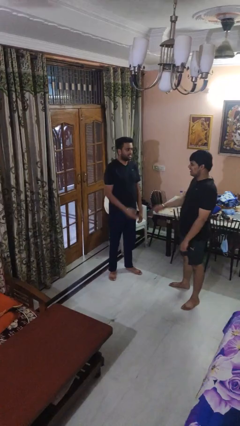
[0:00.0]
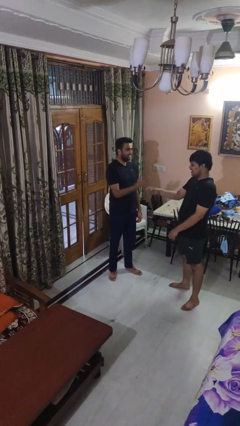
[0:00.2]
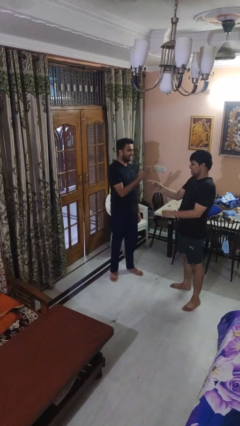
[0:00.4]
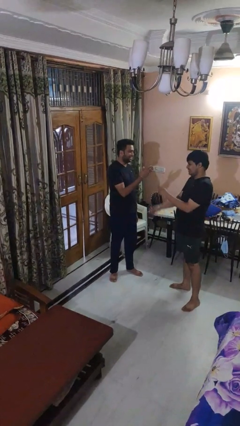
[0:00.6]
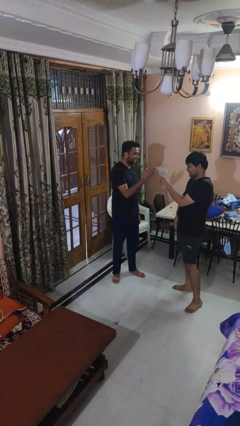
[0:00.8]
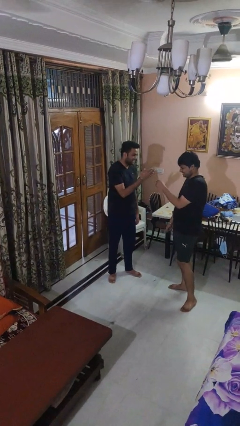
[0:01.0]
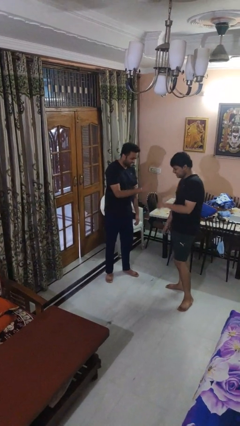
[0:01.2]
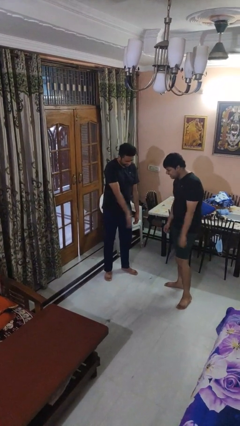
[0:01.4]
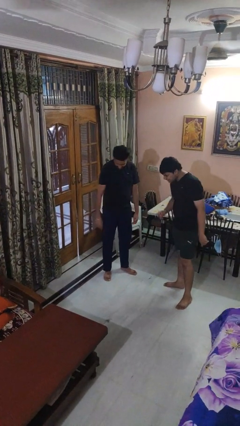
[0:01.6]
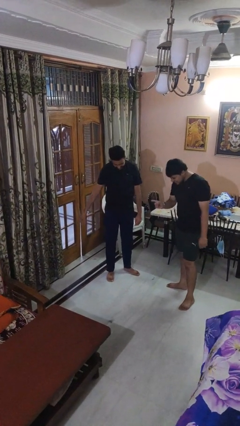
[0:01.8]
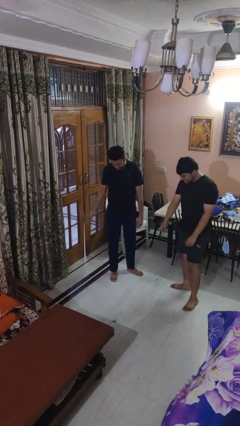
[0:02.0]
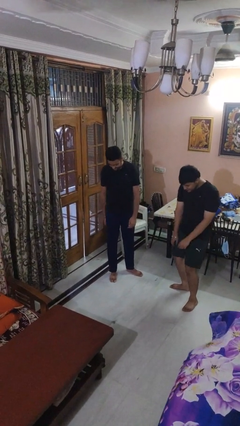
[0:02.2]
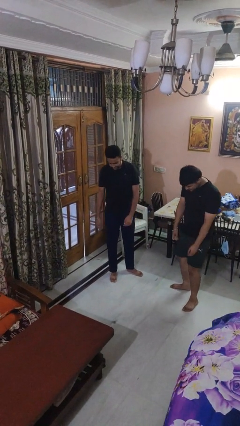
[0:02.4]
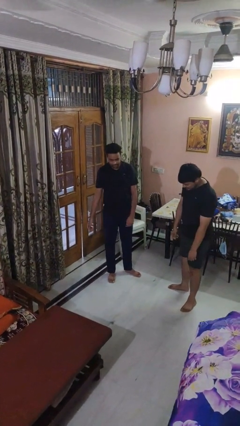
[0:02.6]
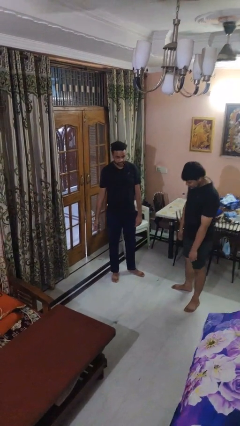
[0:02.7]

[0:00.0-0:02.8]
person laughs with person

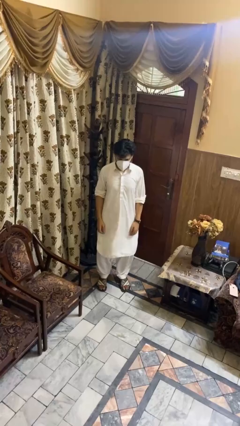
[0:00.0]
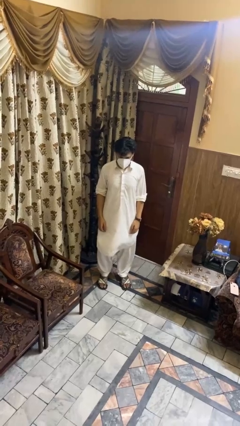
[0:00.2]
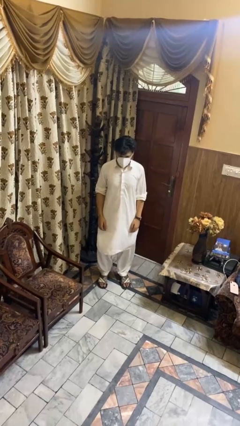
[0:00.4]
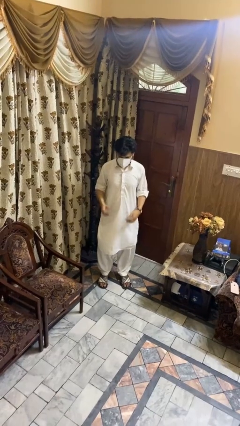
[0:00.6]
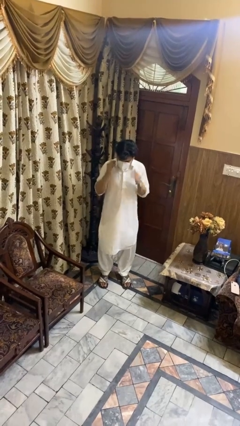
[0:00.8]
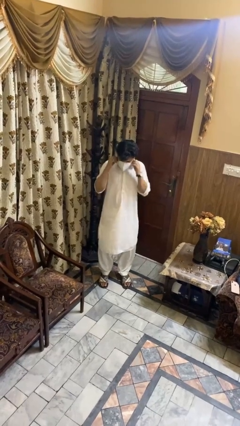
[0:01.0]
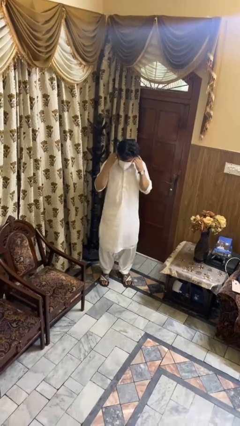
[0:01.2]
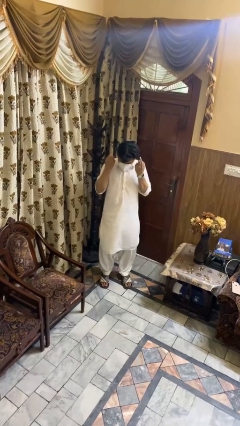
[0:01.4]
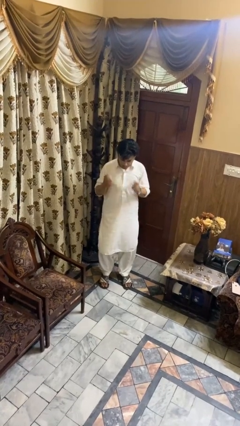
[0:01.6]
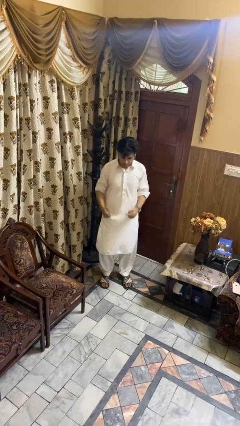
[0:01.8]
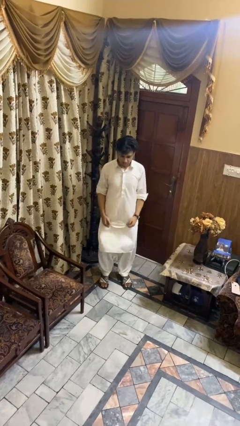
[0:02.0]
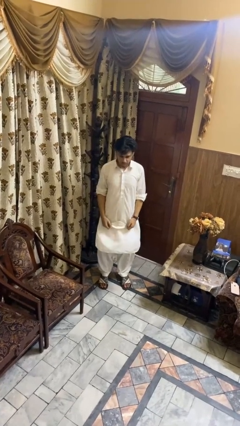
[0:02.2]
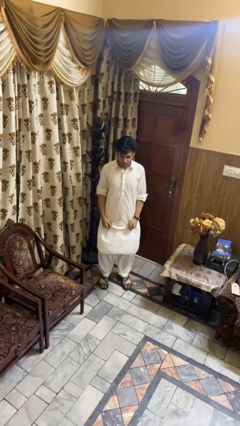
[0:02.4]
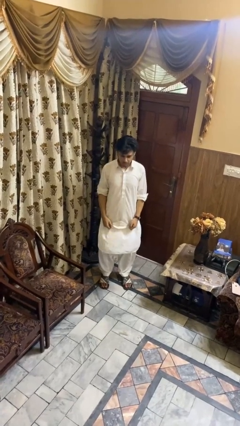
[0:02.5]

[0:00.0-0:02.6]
person takes off facemask

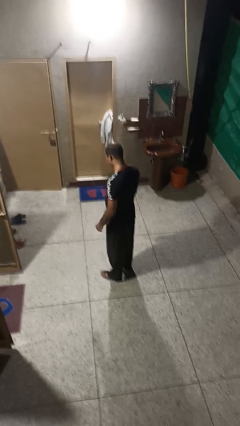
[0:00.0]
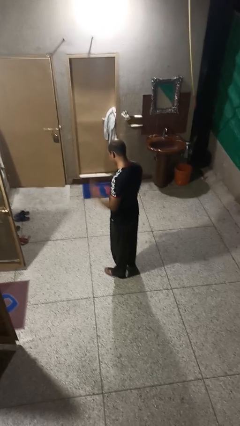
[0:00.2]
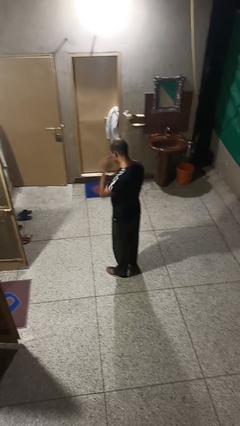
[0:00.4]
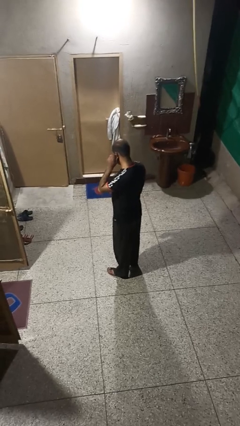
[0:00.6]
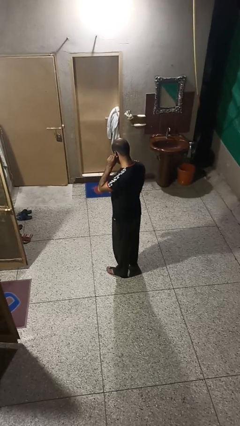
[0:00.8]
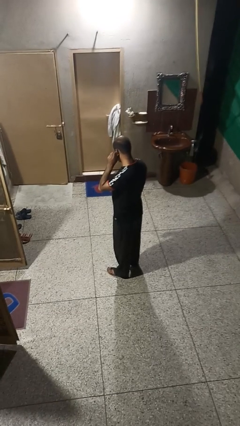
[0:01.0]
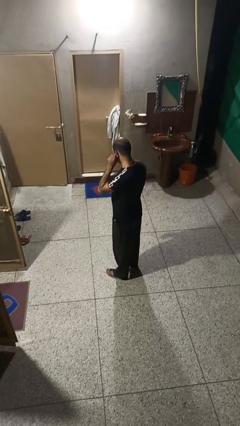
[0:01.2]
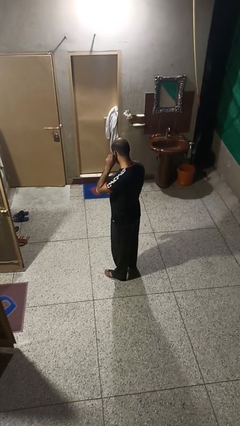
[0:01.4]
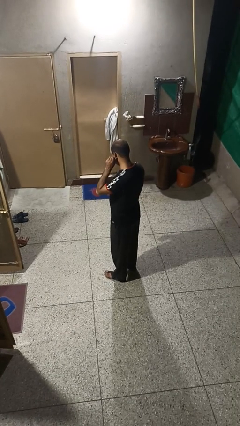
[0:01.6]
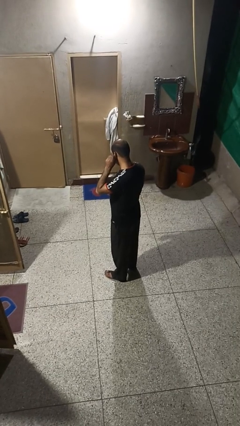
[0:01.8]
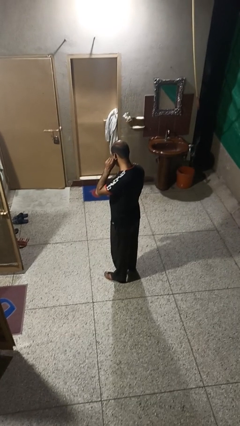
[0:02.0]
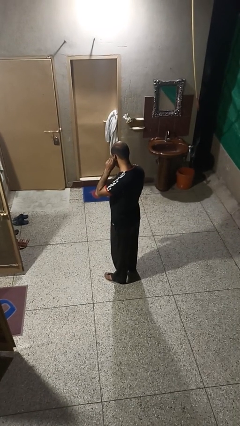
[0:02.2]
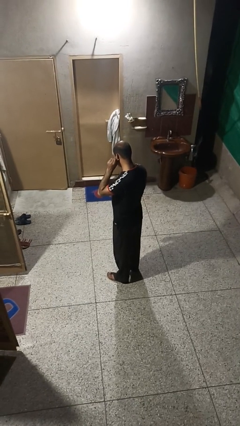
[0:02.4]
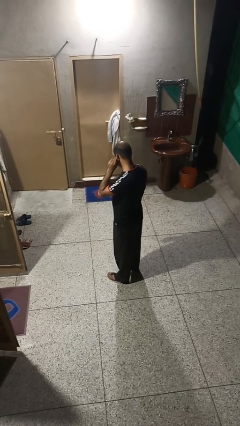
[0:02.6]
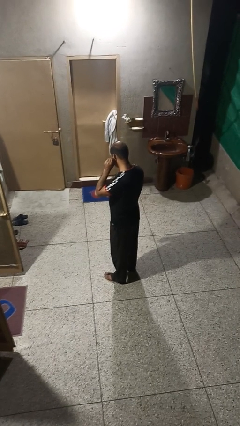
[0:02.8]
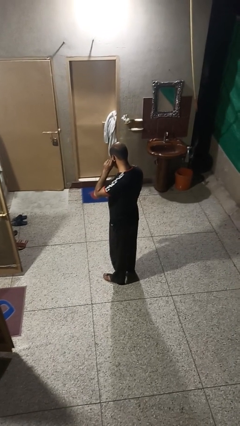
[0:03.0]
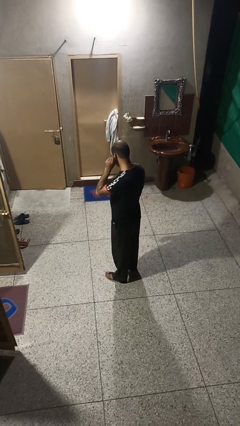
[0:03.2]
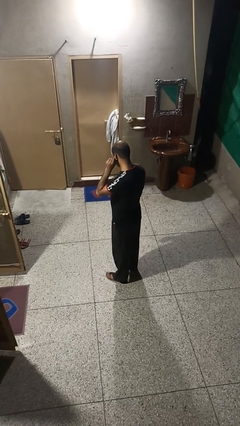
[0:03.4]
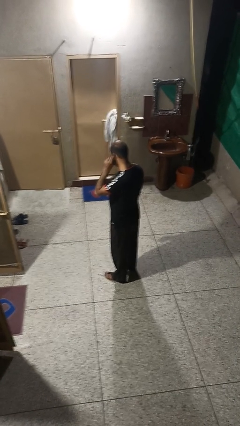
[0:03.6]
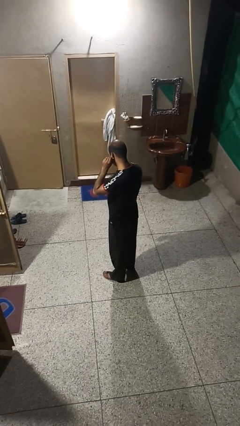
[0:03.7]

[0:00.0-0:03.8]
person touches earlobe

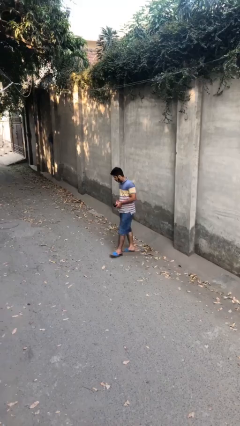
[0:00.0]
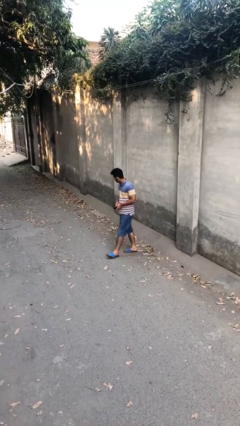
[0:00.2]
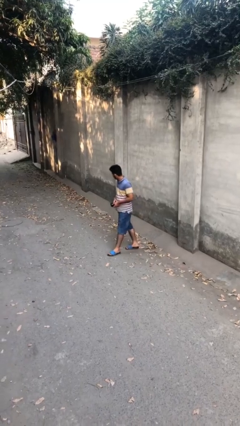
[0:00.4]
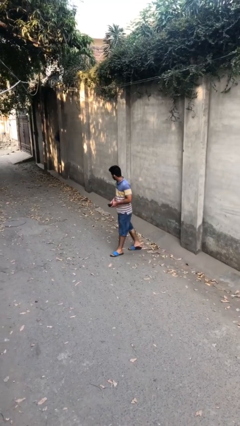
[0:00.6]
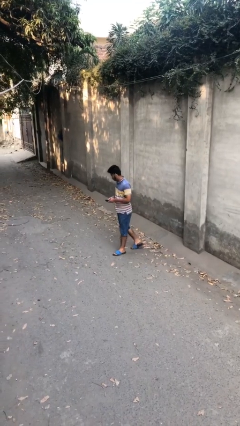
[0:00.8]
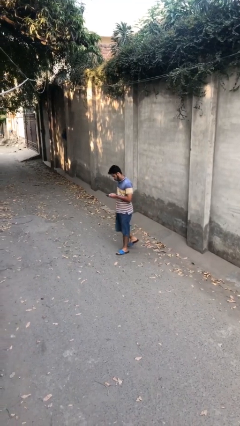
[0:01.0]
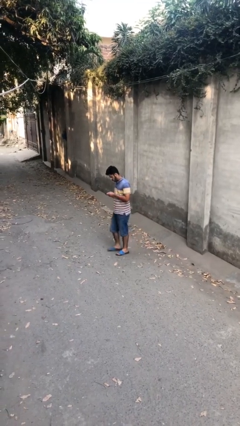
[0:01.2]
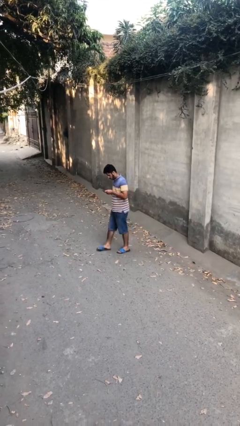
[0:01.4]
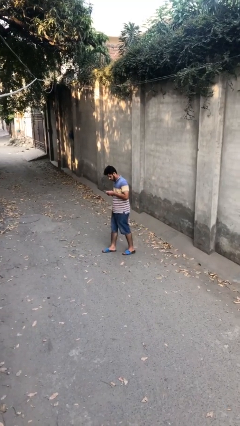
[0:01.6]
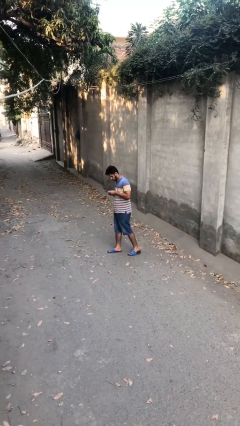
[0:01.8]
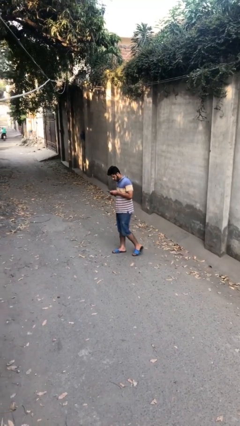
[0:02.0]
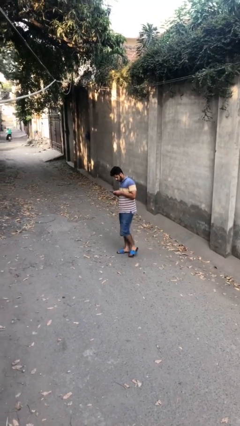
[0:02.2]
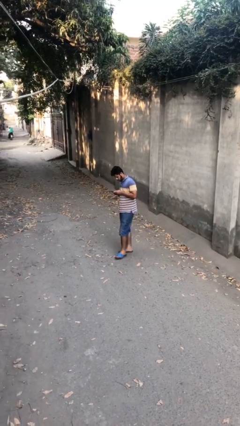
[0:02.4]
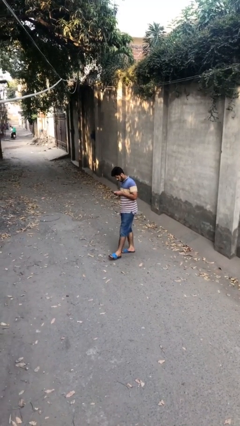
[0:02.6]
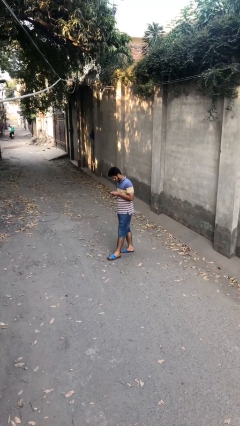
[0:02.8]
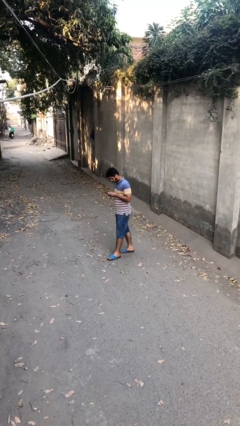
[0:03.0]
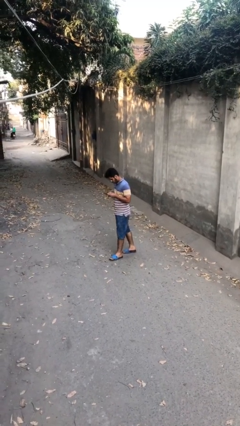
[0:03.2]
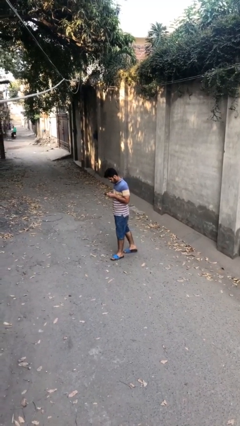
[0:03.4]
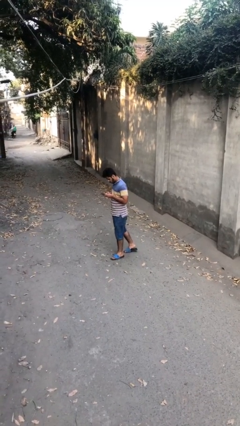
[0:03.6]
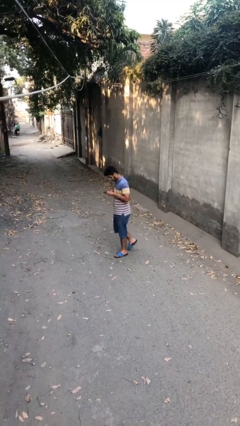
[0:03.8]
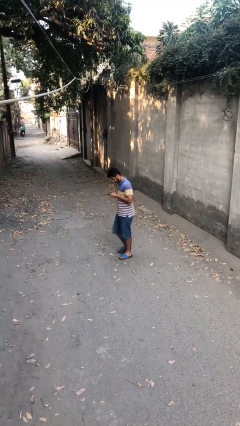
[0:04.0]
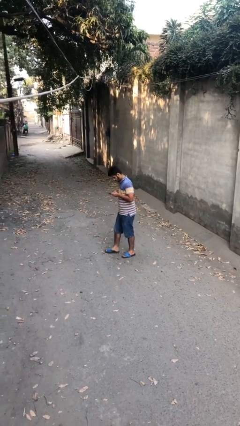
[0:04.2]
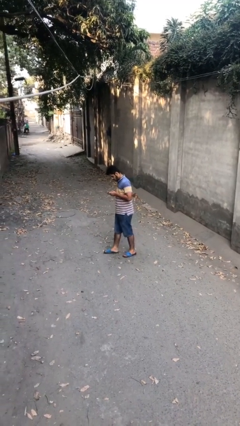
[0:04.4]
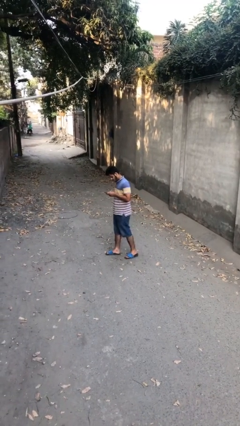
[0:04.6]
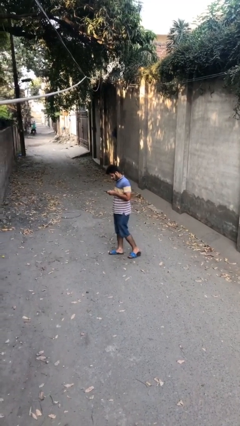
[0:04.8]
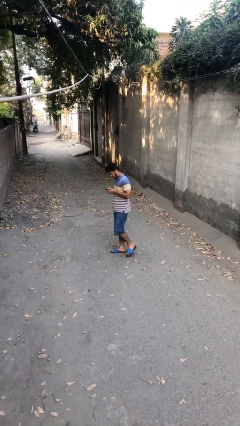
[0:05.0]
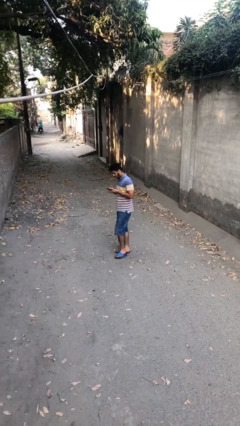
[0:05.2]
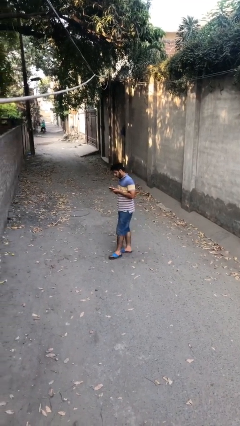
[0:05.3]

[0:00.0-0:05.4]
person texts on phone

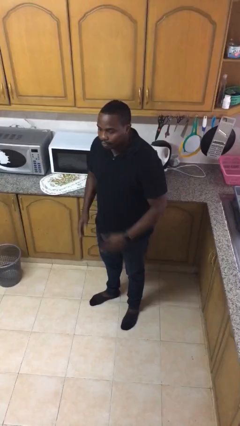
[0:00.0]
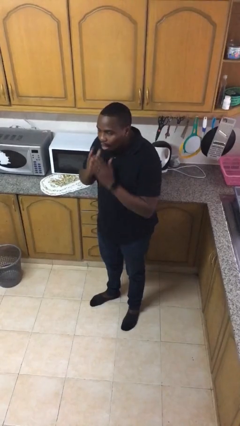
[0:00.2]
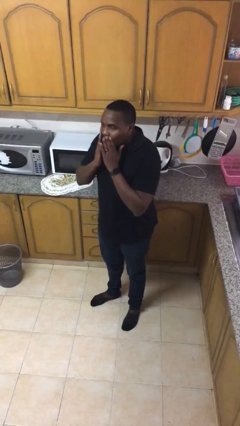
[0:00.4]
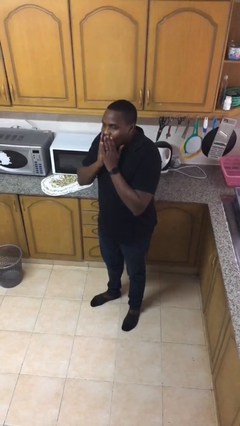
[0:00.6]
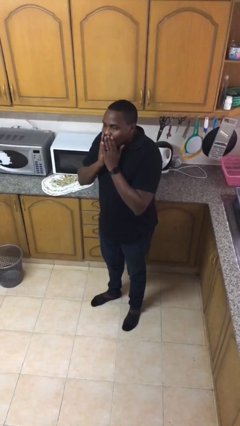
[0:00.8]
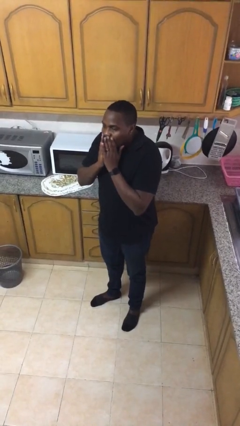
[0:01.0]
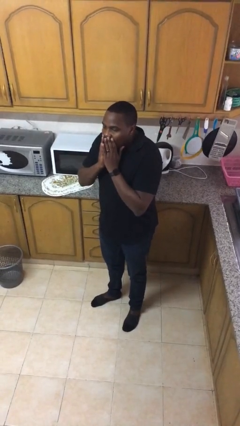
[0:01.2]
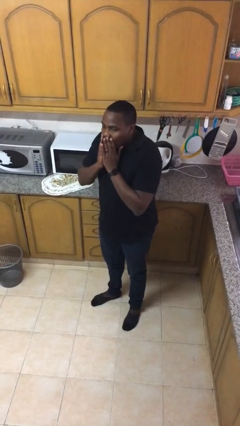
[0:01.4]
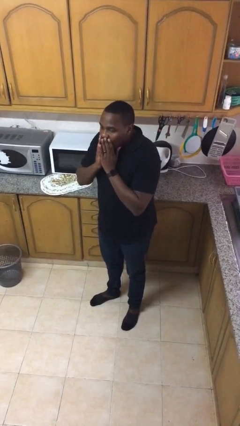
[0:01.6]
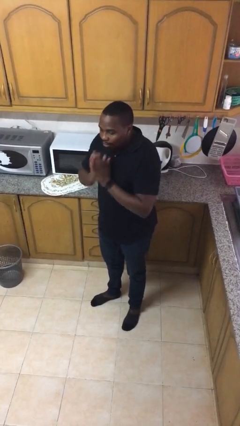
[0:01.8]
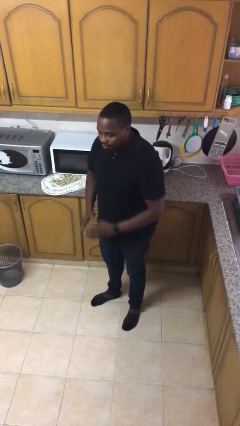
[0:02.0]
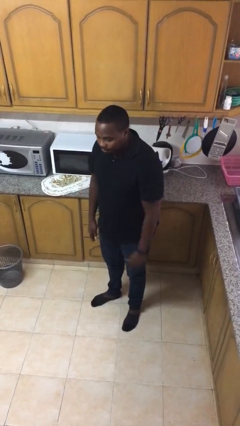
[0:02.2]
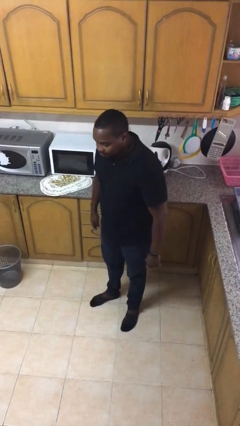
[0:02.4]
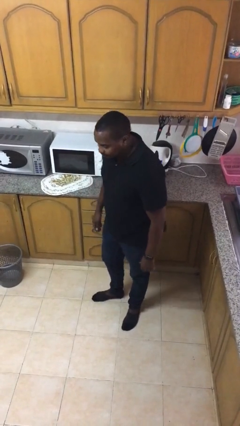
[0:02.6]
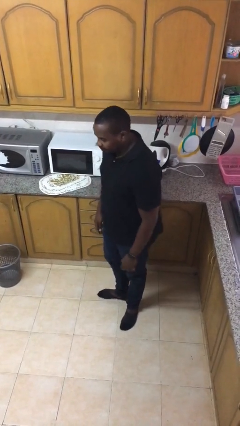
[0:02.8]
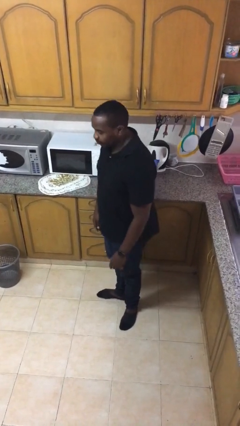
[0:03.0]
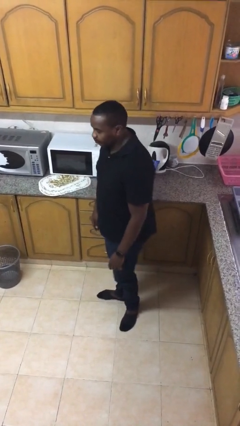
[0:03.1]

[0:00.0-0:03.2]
person yawns
